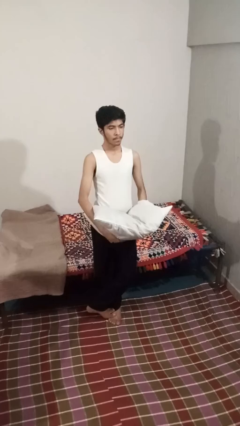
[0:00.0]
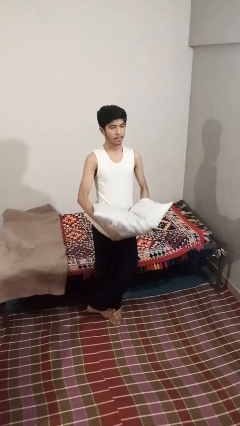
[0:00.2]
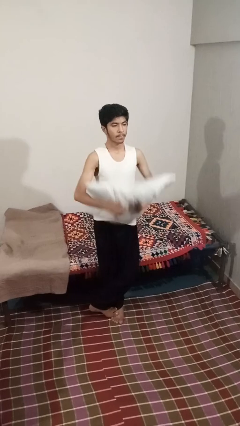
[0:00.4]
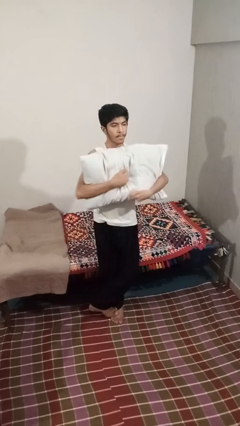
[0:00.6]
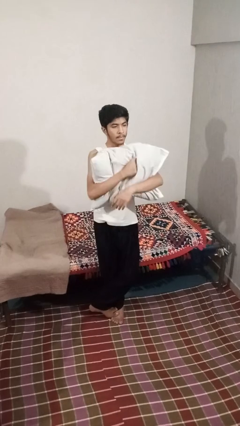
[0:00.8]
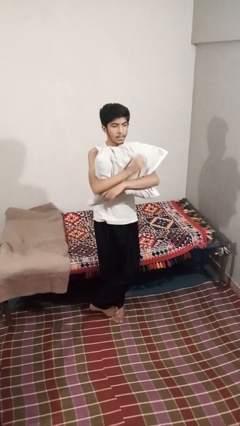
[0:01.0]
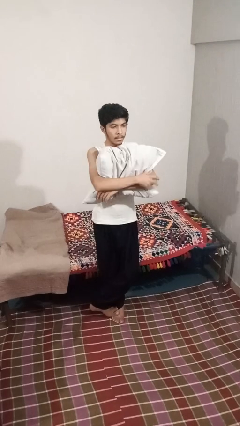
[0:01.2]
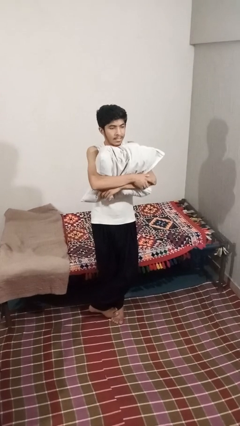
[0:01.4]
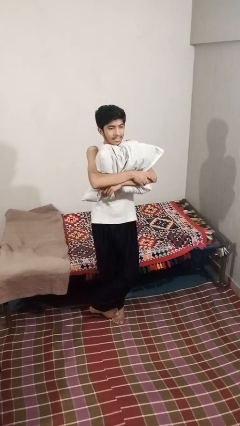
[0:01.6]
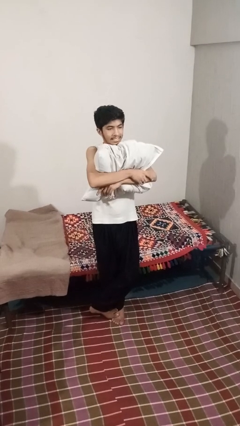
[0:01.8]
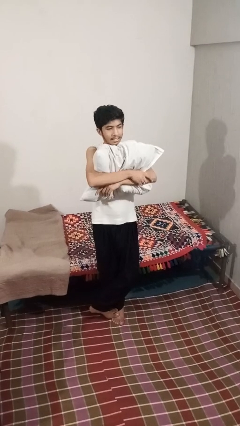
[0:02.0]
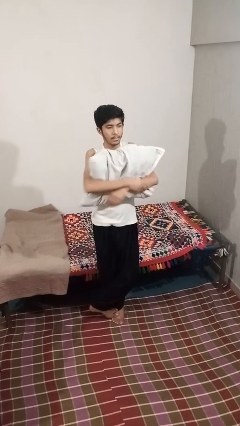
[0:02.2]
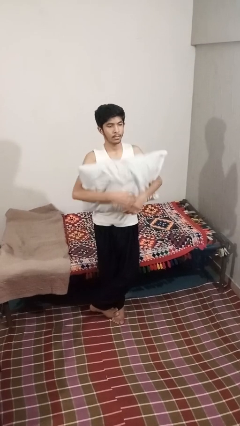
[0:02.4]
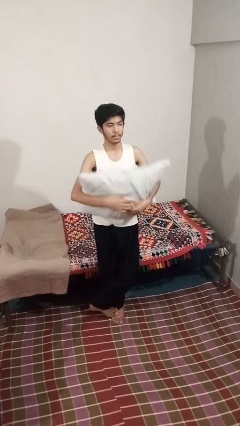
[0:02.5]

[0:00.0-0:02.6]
person squeezes object

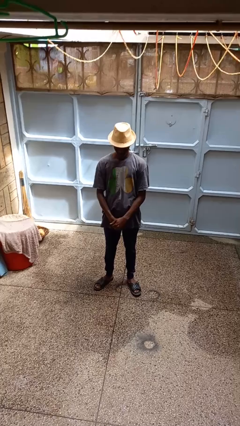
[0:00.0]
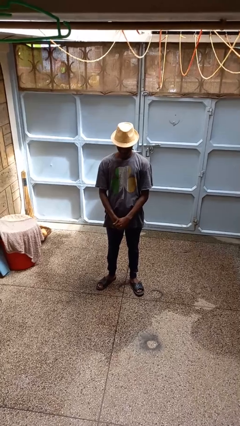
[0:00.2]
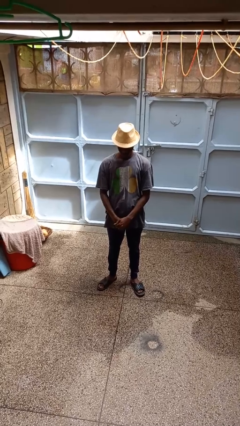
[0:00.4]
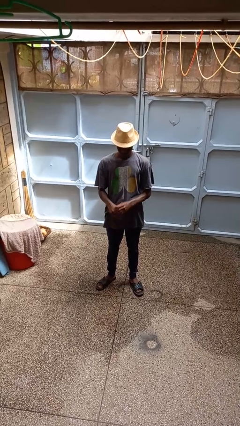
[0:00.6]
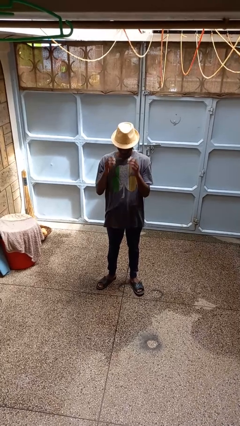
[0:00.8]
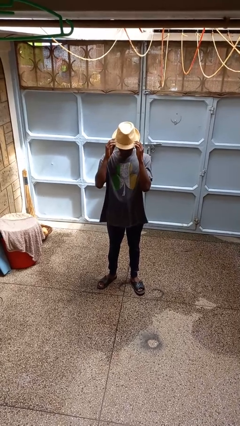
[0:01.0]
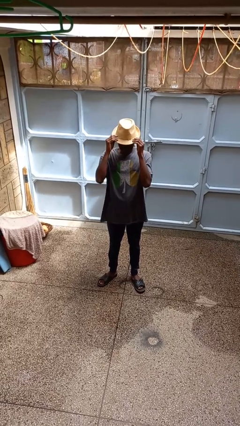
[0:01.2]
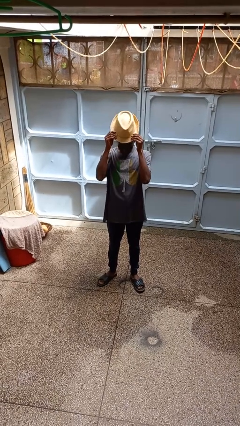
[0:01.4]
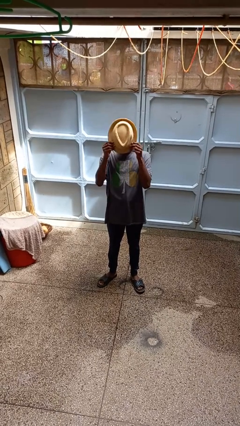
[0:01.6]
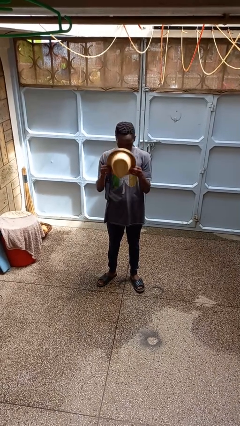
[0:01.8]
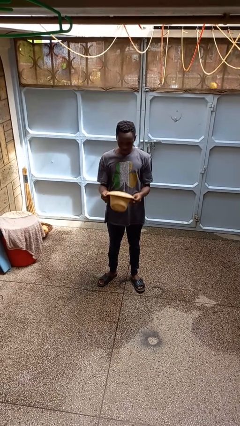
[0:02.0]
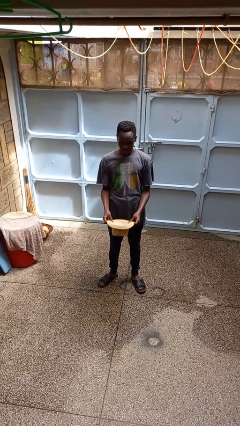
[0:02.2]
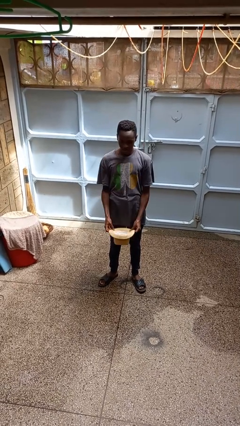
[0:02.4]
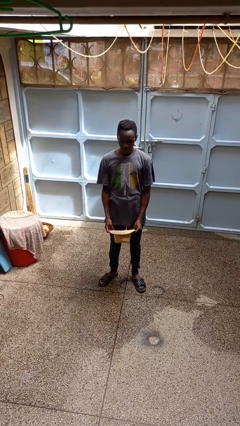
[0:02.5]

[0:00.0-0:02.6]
person takes off hat

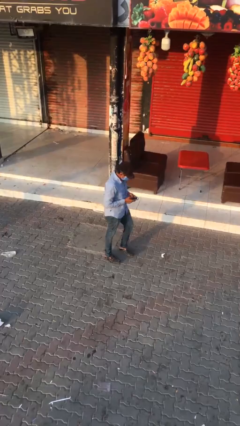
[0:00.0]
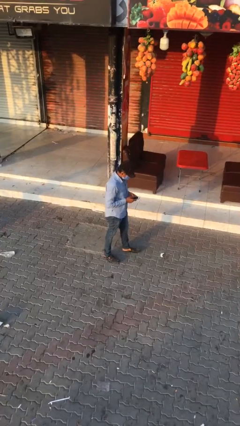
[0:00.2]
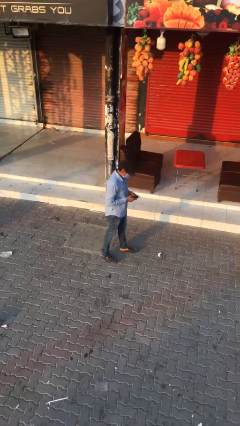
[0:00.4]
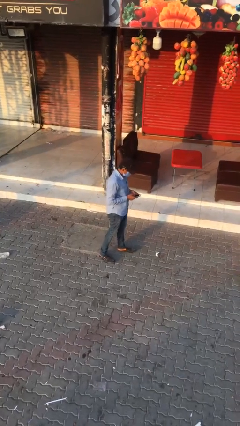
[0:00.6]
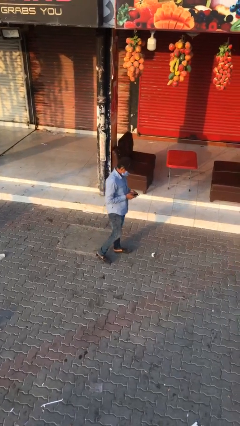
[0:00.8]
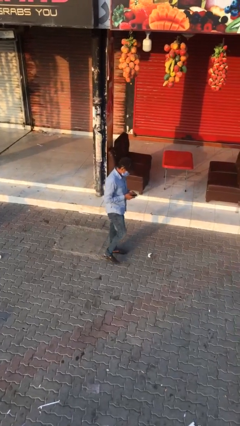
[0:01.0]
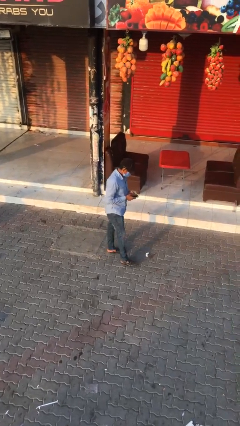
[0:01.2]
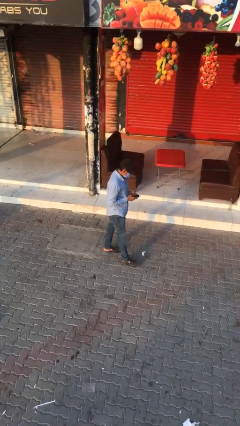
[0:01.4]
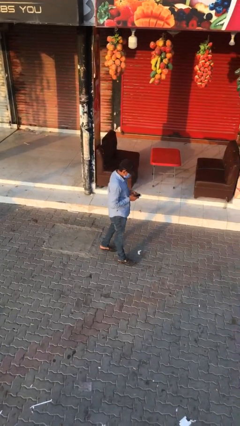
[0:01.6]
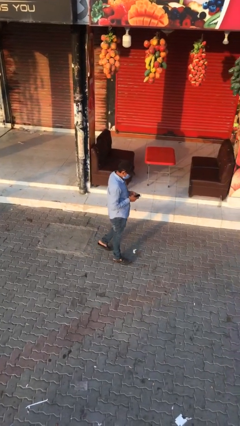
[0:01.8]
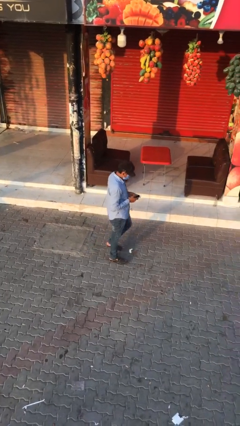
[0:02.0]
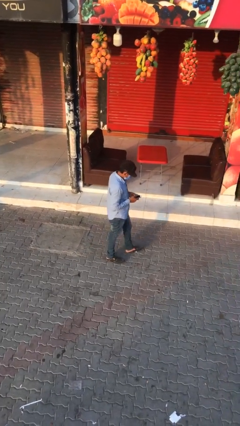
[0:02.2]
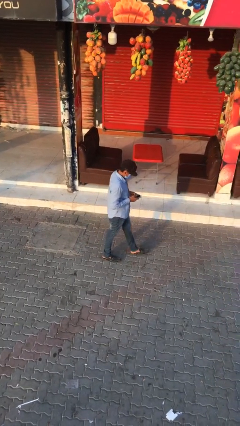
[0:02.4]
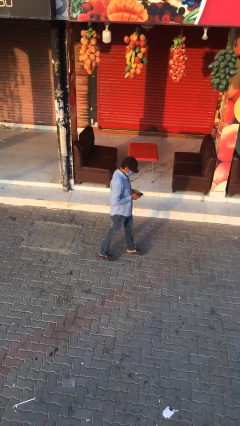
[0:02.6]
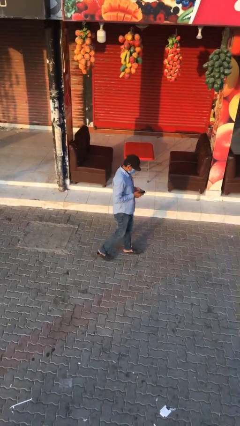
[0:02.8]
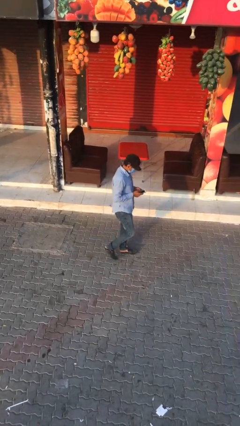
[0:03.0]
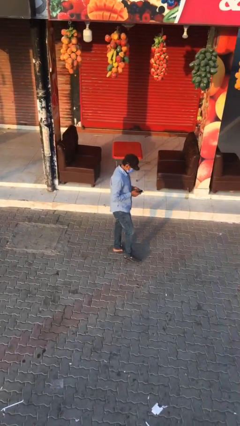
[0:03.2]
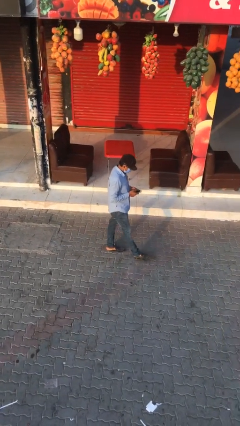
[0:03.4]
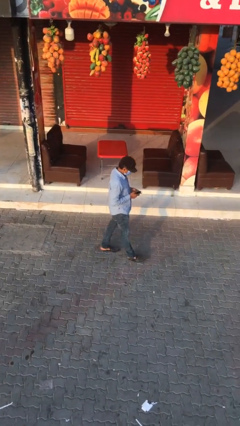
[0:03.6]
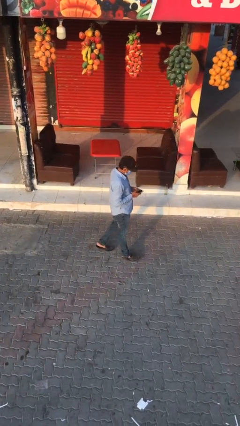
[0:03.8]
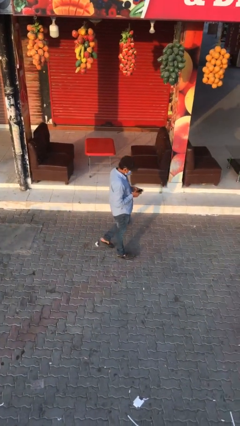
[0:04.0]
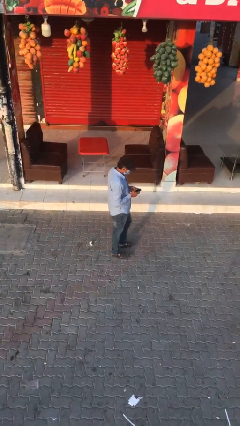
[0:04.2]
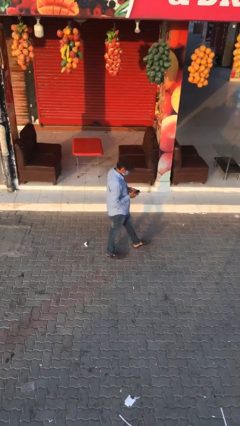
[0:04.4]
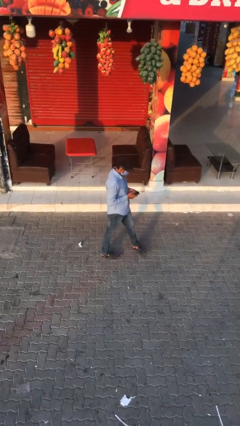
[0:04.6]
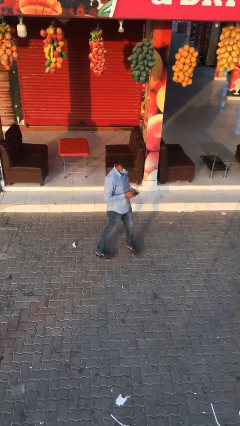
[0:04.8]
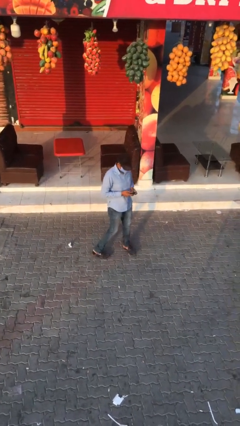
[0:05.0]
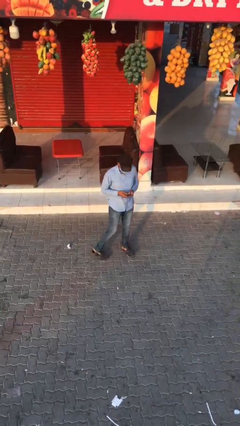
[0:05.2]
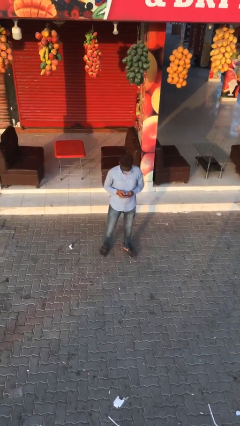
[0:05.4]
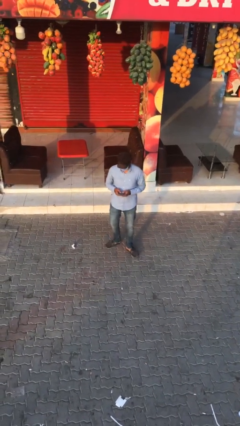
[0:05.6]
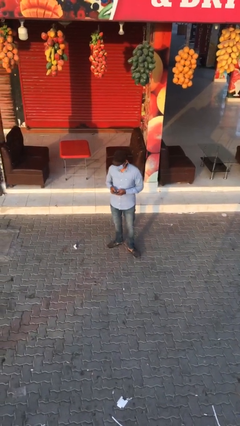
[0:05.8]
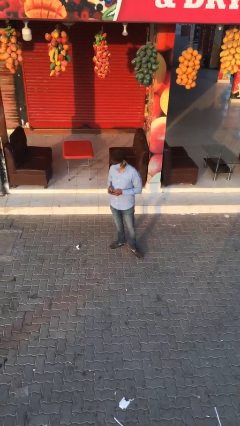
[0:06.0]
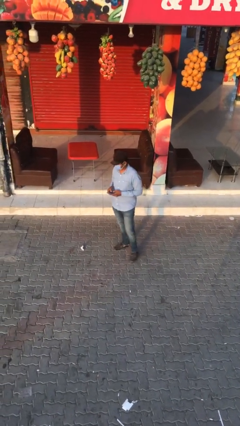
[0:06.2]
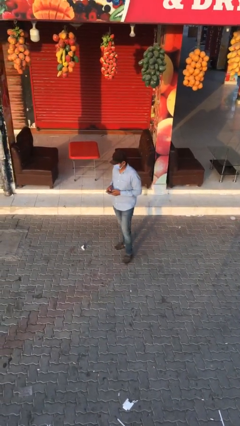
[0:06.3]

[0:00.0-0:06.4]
person texts on phone

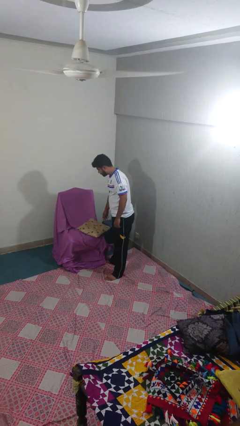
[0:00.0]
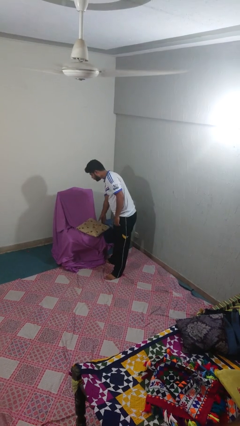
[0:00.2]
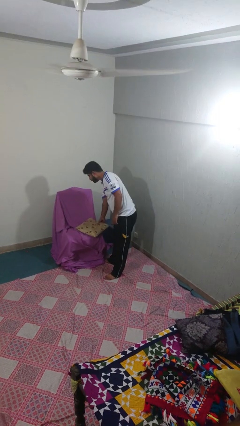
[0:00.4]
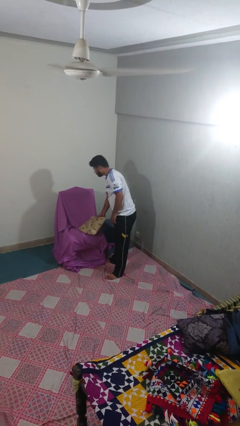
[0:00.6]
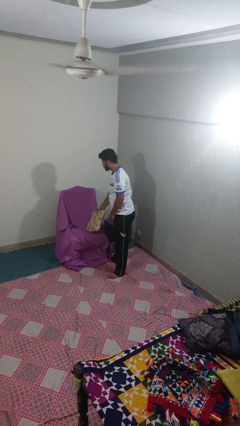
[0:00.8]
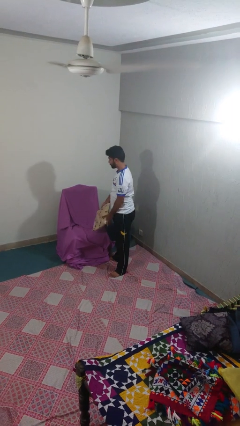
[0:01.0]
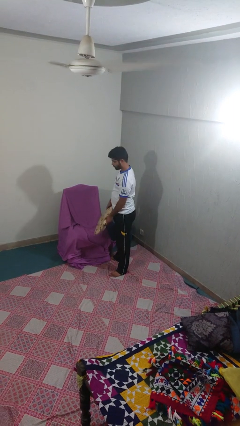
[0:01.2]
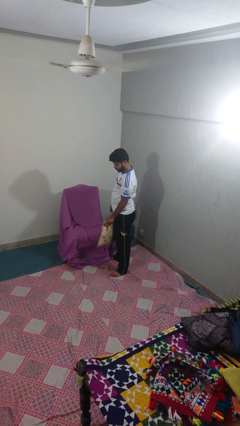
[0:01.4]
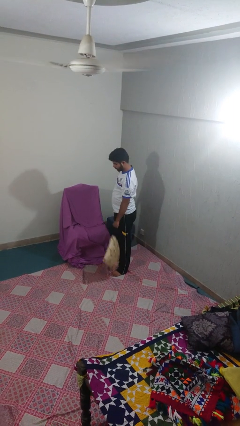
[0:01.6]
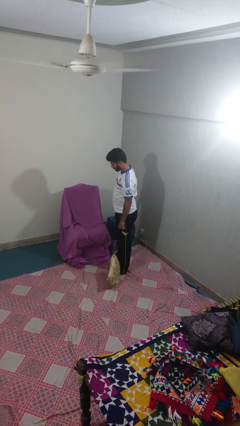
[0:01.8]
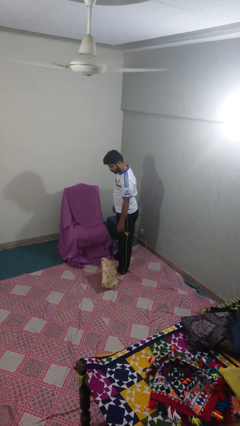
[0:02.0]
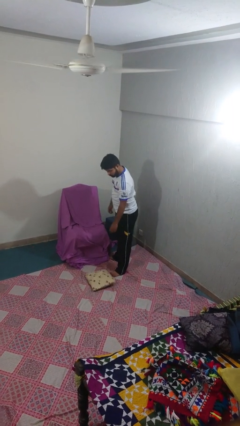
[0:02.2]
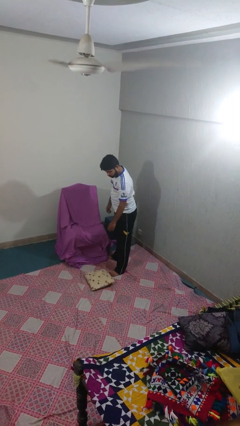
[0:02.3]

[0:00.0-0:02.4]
person drops object

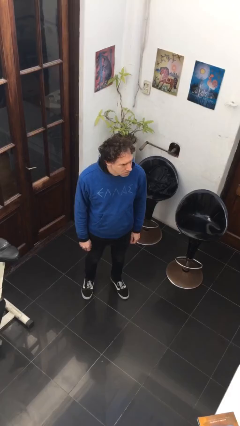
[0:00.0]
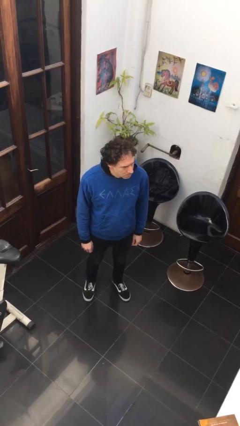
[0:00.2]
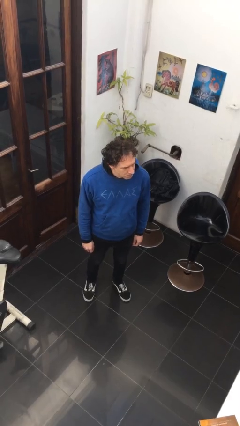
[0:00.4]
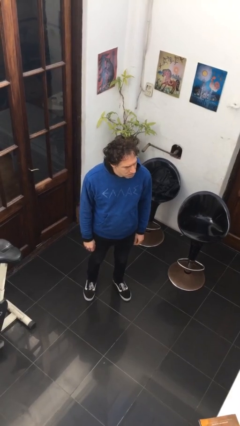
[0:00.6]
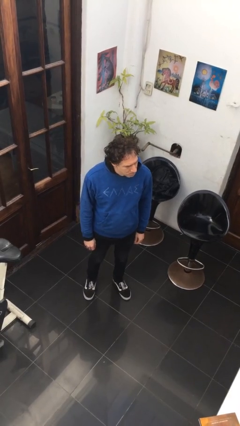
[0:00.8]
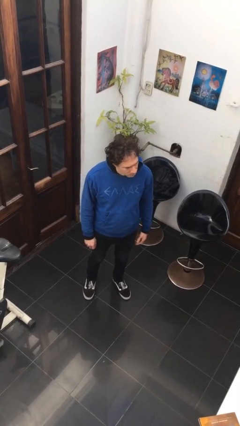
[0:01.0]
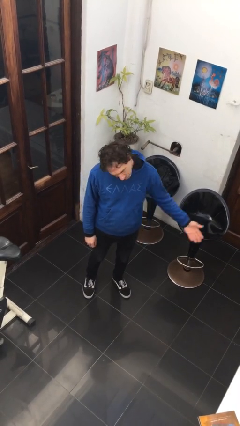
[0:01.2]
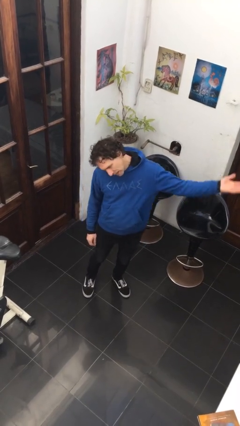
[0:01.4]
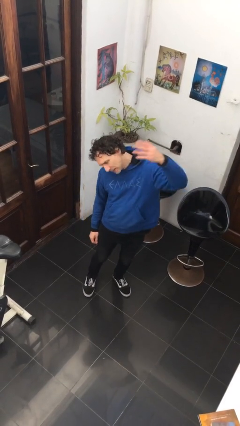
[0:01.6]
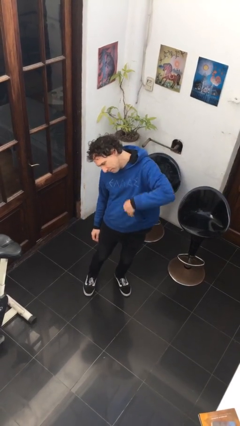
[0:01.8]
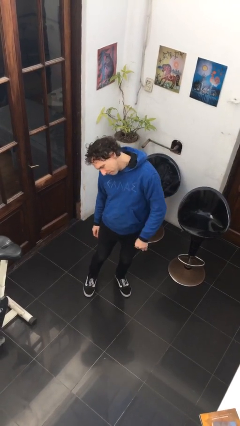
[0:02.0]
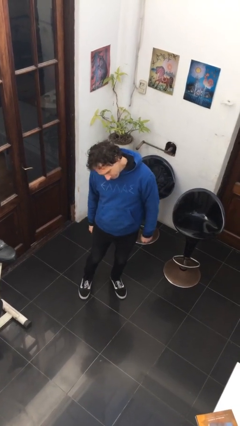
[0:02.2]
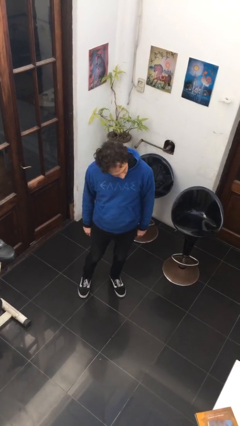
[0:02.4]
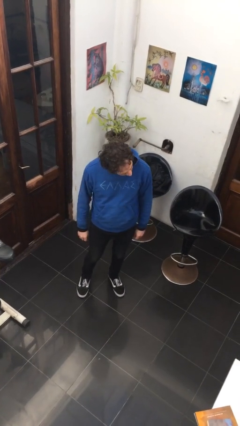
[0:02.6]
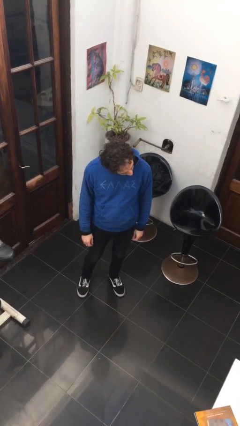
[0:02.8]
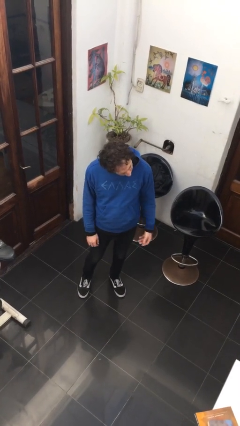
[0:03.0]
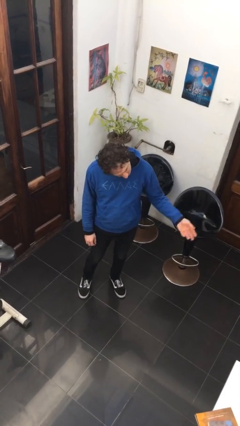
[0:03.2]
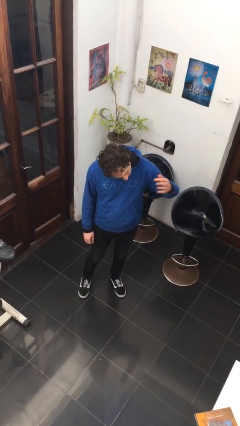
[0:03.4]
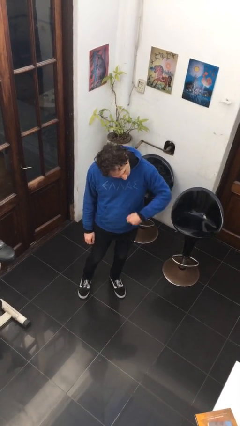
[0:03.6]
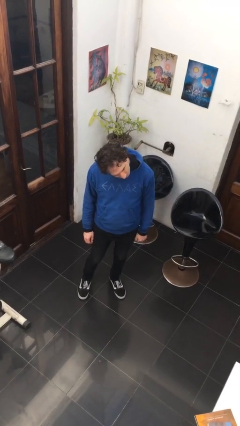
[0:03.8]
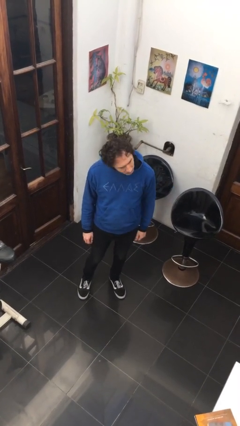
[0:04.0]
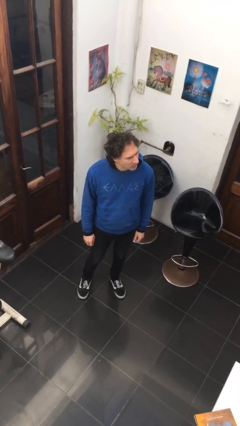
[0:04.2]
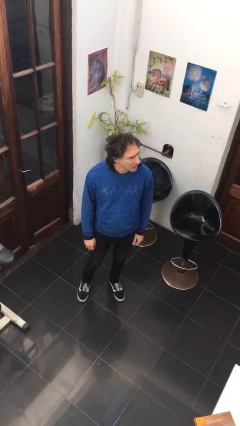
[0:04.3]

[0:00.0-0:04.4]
person gestures come here
